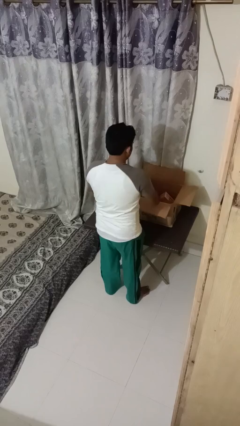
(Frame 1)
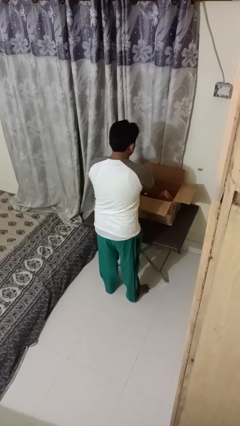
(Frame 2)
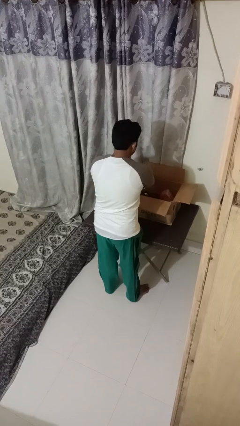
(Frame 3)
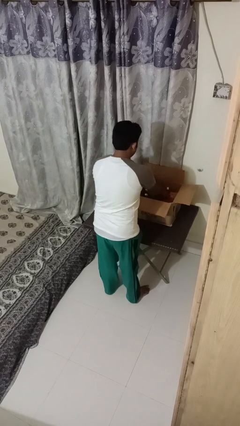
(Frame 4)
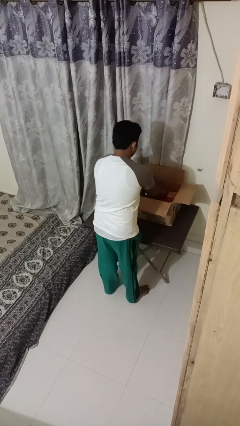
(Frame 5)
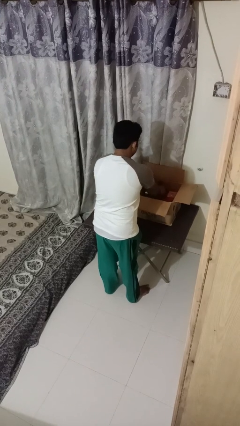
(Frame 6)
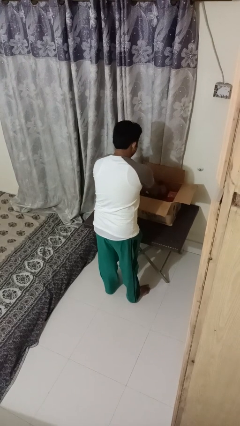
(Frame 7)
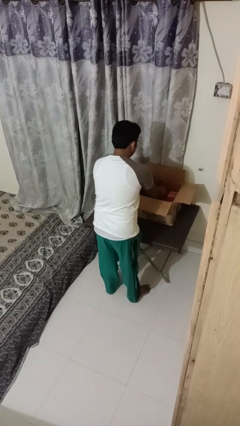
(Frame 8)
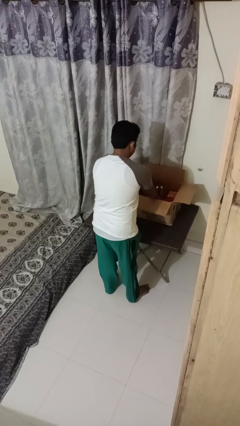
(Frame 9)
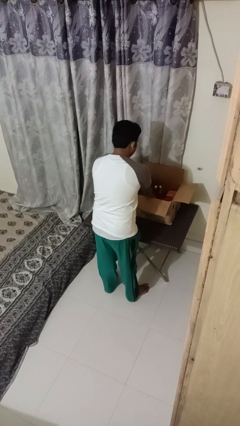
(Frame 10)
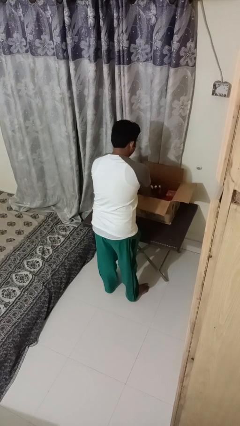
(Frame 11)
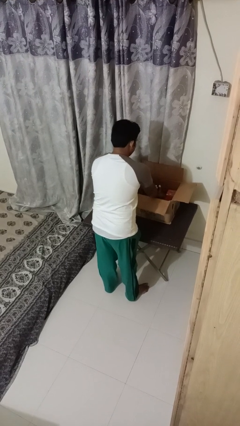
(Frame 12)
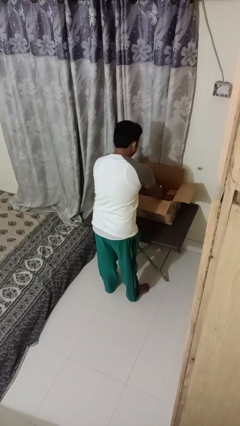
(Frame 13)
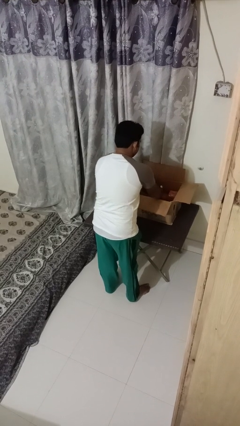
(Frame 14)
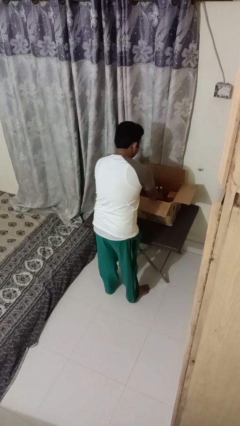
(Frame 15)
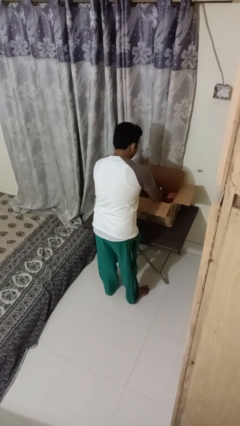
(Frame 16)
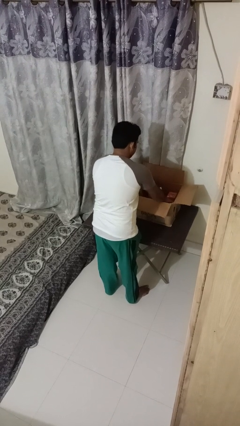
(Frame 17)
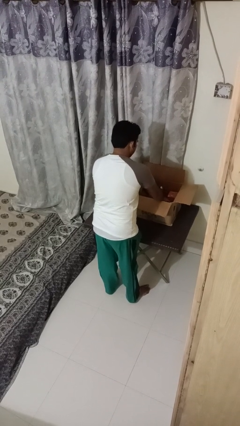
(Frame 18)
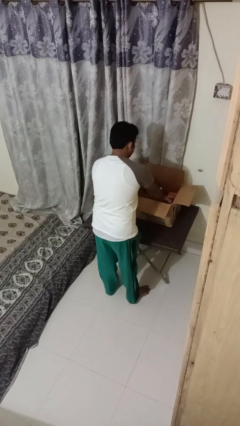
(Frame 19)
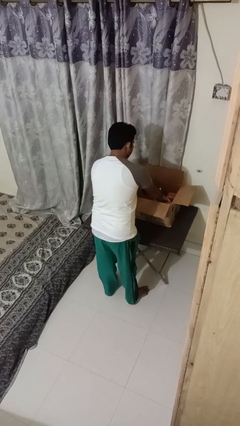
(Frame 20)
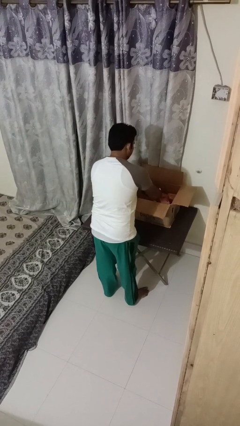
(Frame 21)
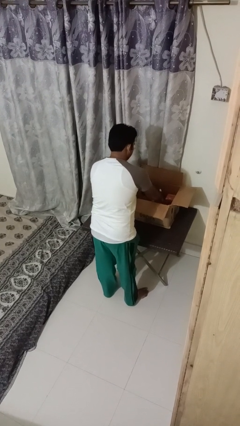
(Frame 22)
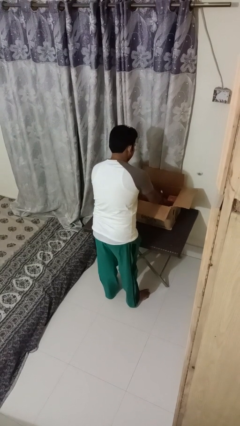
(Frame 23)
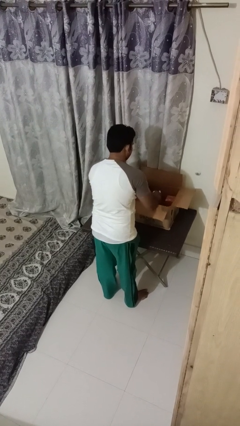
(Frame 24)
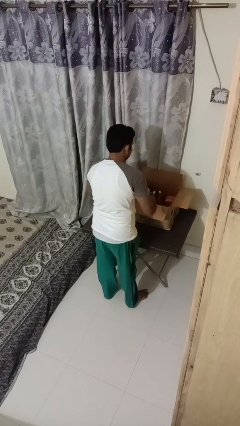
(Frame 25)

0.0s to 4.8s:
person searches in box

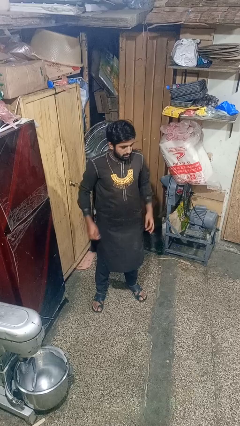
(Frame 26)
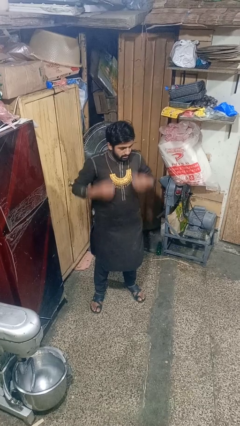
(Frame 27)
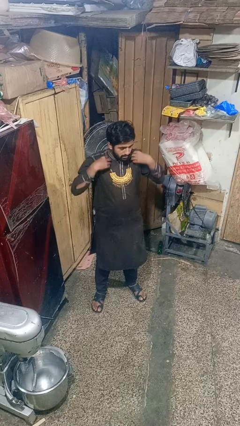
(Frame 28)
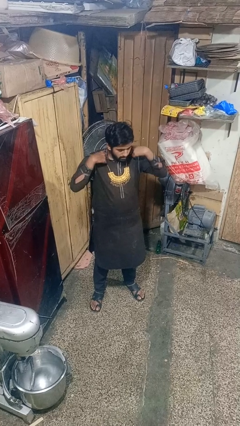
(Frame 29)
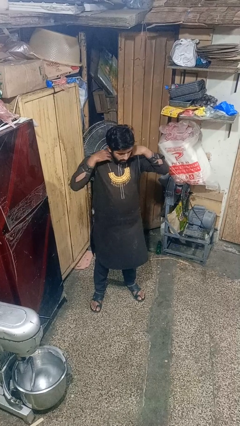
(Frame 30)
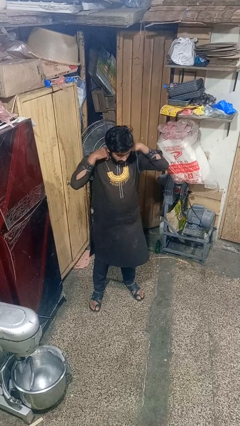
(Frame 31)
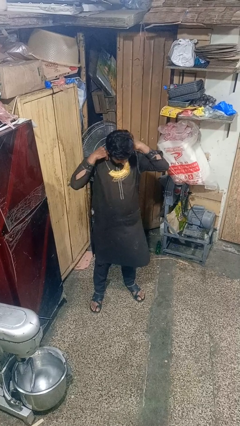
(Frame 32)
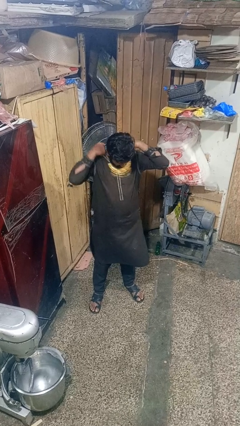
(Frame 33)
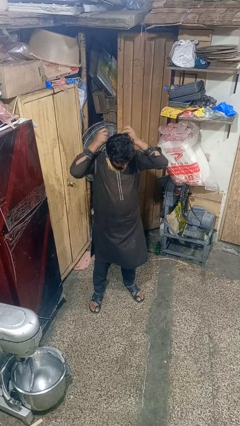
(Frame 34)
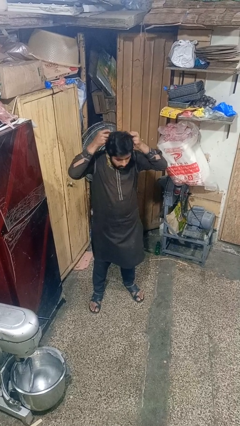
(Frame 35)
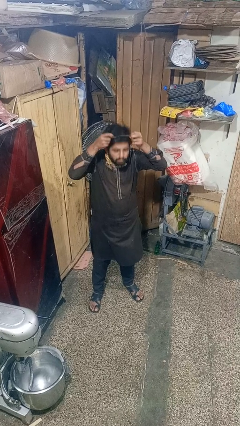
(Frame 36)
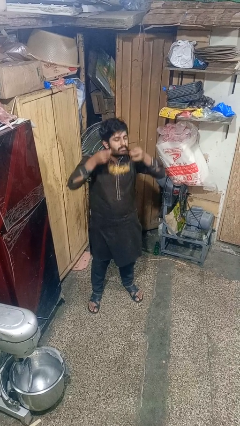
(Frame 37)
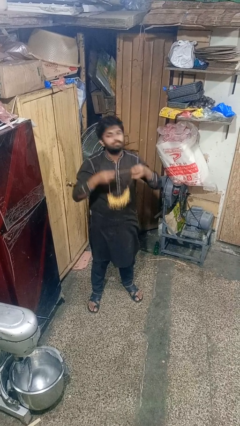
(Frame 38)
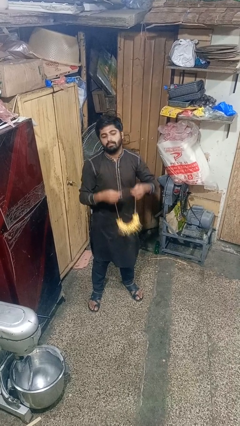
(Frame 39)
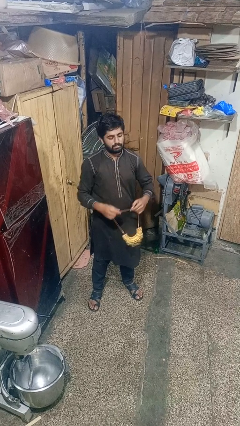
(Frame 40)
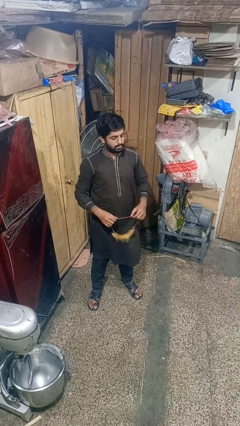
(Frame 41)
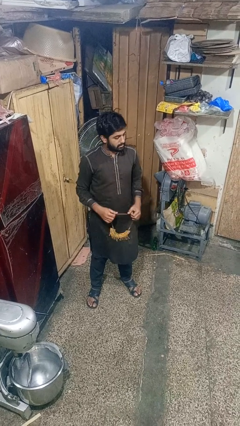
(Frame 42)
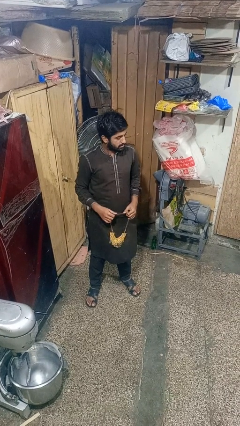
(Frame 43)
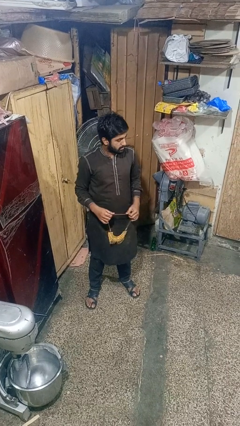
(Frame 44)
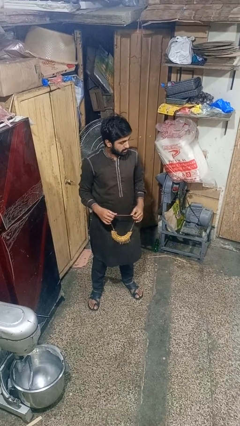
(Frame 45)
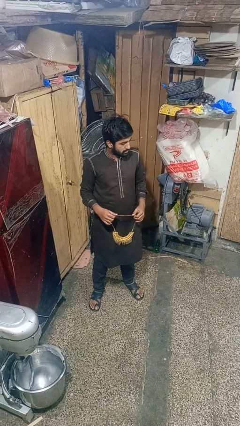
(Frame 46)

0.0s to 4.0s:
person takes off necklace

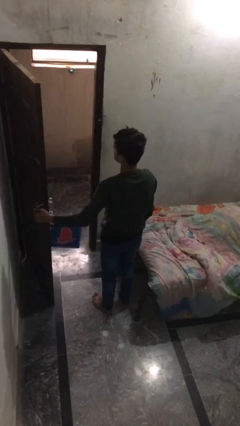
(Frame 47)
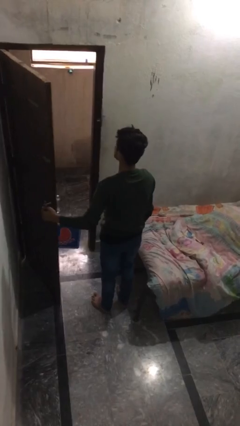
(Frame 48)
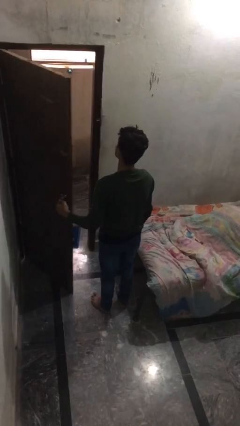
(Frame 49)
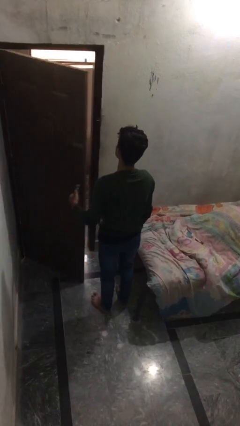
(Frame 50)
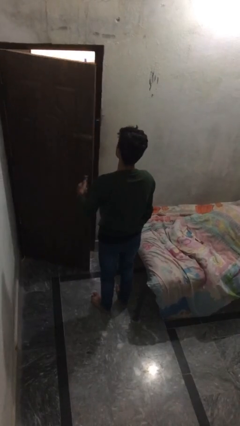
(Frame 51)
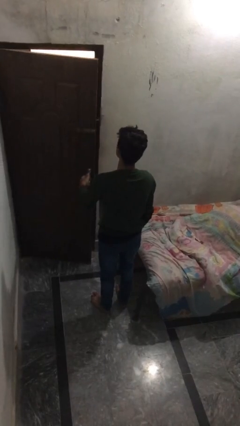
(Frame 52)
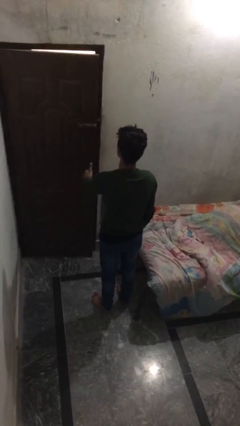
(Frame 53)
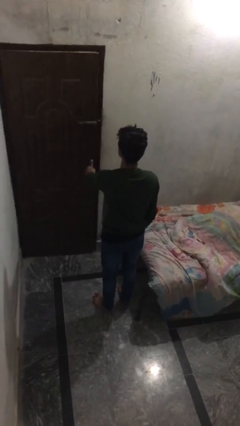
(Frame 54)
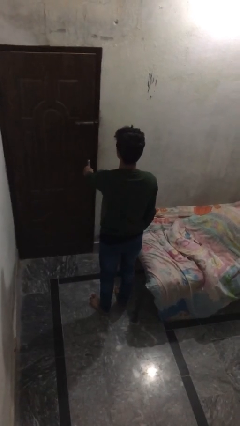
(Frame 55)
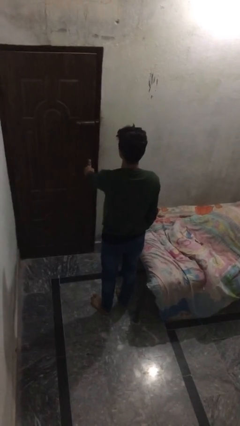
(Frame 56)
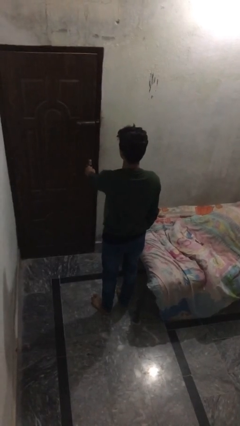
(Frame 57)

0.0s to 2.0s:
person closes facility door

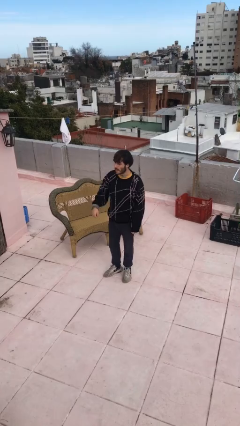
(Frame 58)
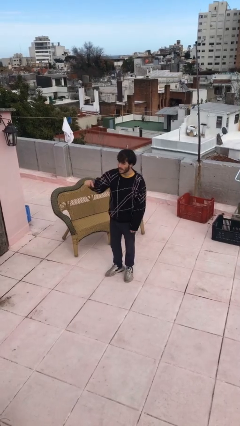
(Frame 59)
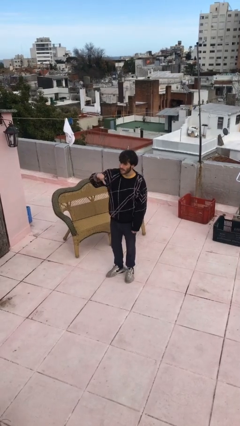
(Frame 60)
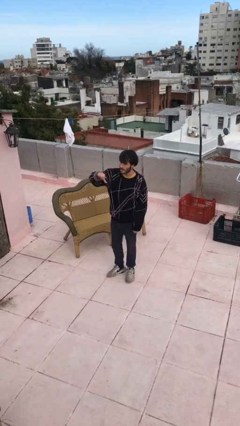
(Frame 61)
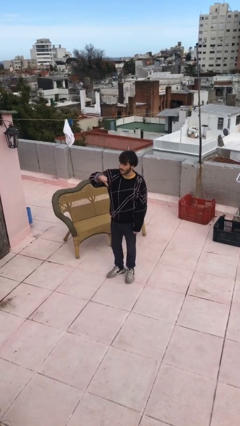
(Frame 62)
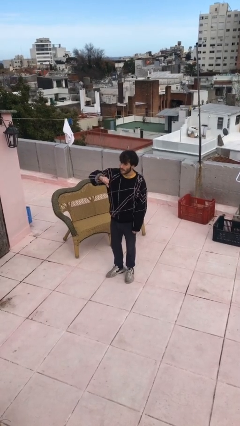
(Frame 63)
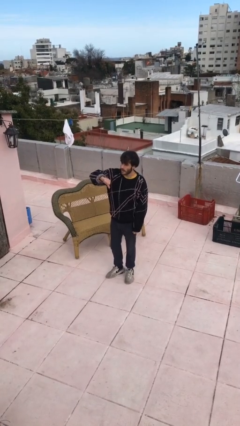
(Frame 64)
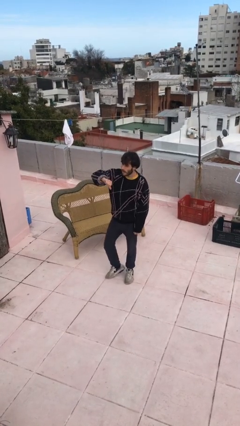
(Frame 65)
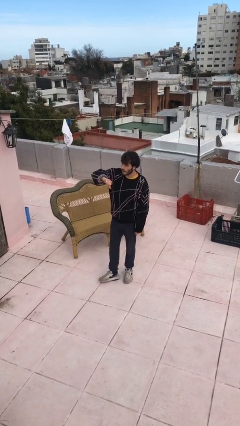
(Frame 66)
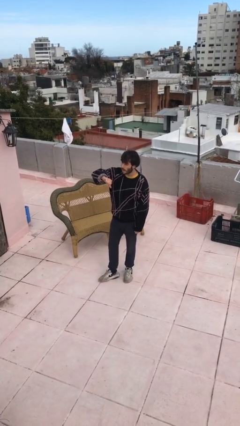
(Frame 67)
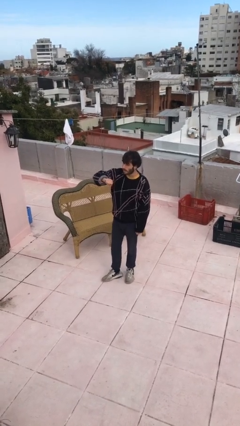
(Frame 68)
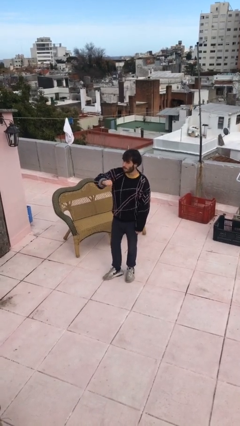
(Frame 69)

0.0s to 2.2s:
person gestures thumbs down

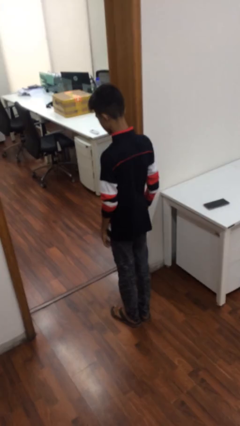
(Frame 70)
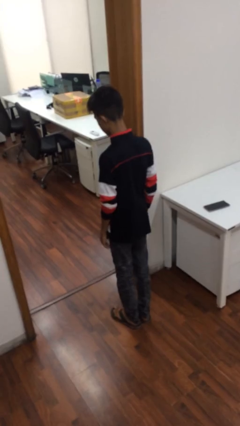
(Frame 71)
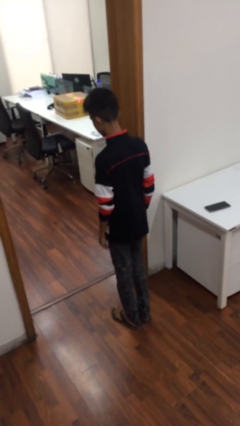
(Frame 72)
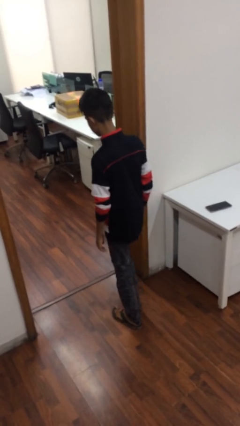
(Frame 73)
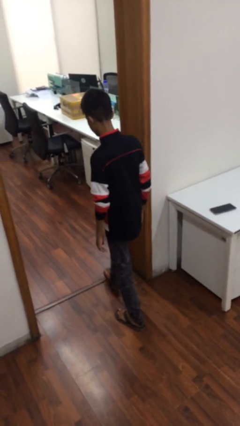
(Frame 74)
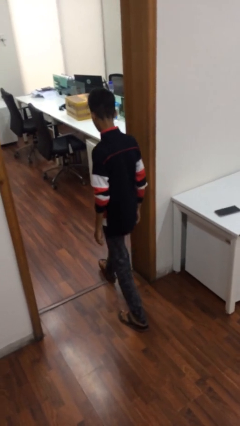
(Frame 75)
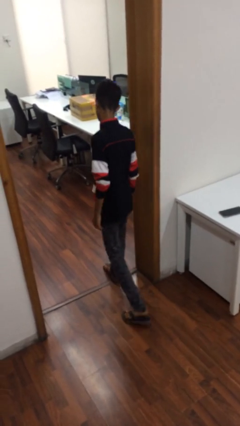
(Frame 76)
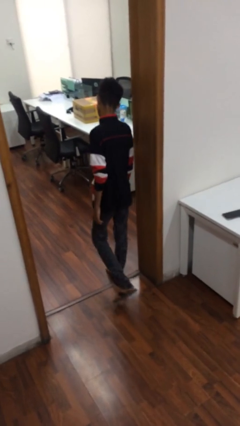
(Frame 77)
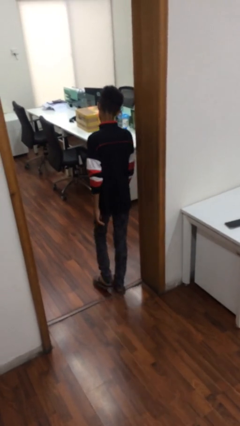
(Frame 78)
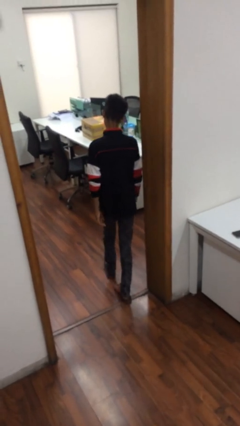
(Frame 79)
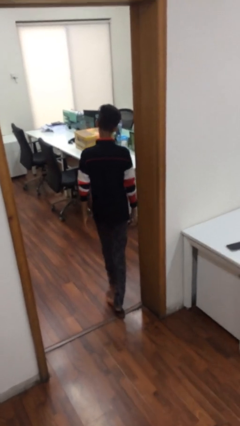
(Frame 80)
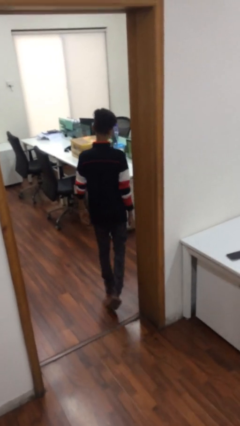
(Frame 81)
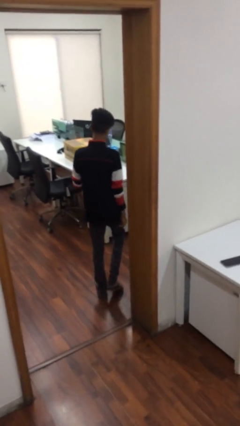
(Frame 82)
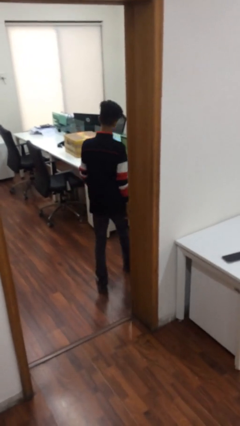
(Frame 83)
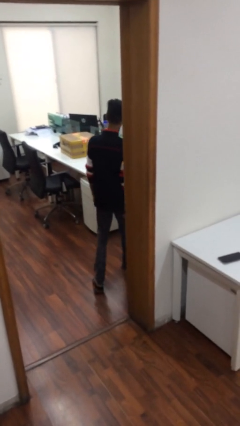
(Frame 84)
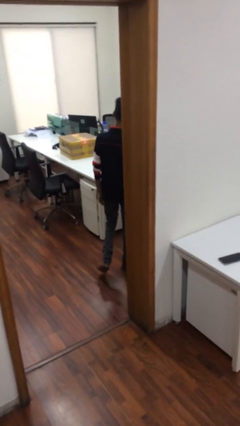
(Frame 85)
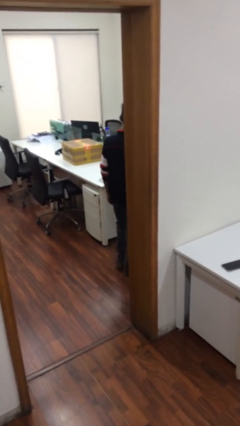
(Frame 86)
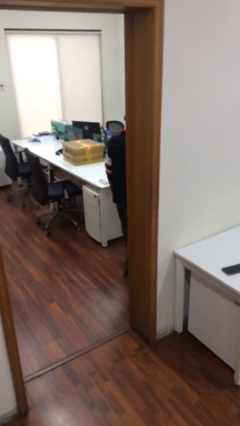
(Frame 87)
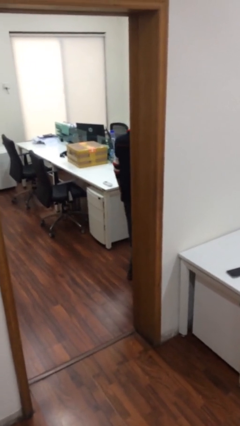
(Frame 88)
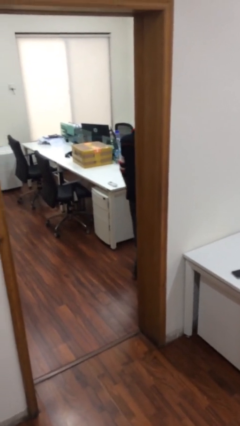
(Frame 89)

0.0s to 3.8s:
person exits scene through structure

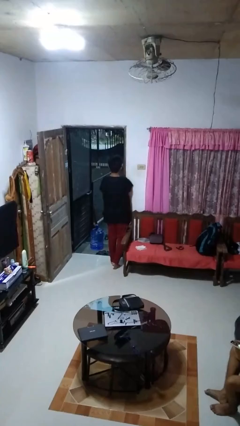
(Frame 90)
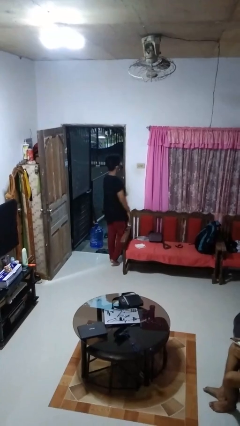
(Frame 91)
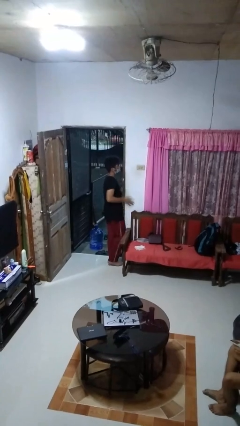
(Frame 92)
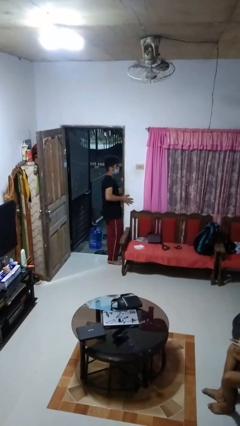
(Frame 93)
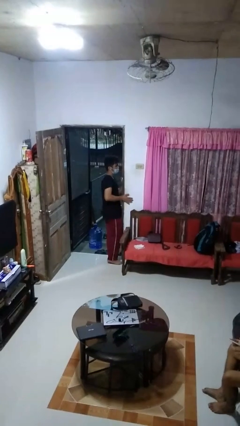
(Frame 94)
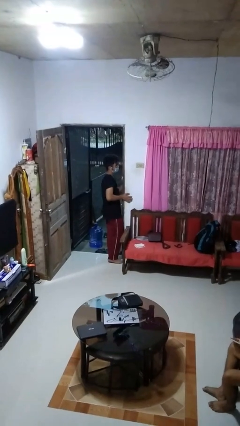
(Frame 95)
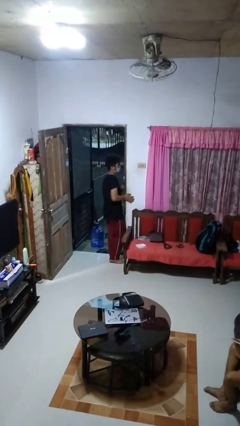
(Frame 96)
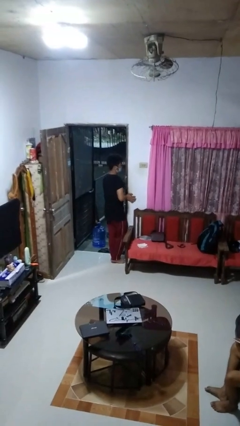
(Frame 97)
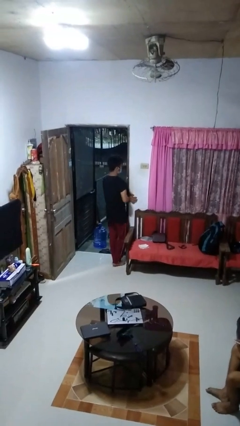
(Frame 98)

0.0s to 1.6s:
person bumps into wall
